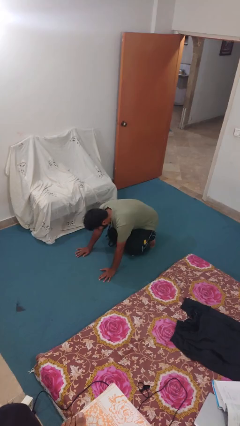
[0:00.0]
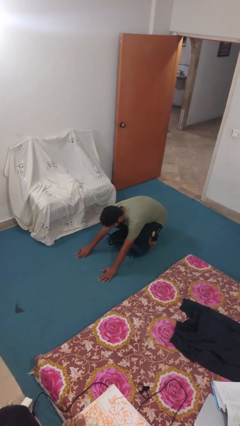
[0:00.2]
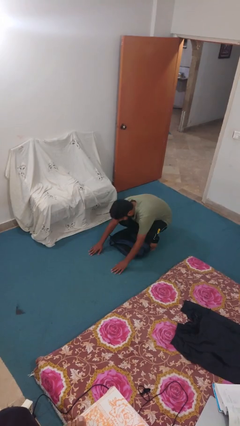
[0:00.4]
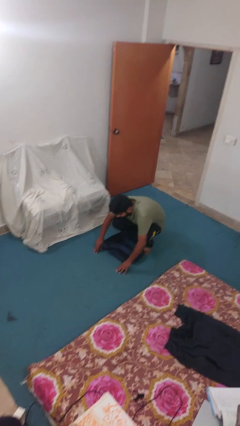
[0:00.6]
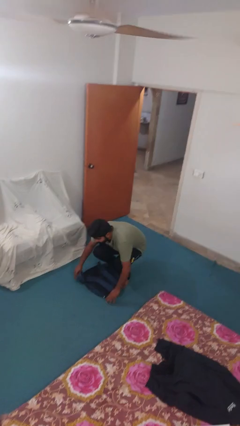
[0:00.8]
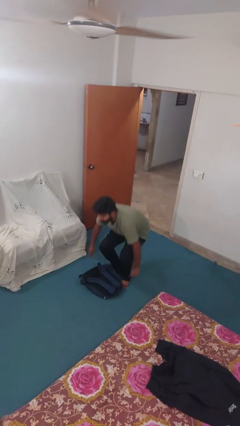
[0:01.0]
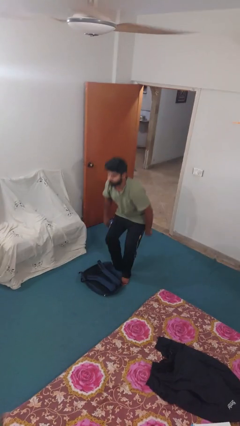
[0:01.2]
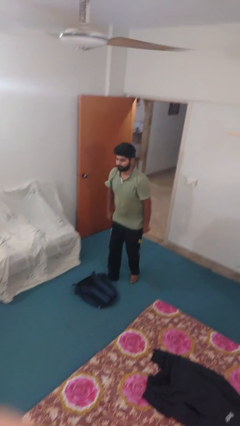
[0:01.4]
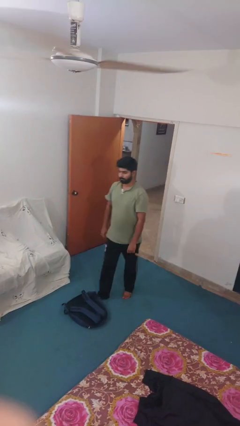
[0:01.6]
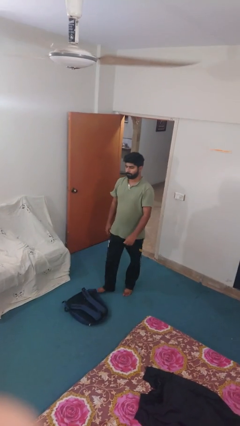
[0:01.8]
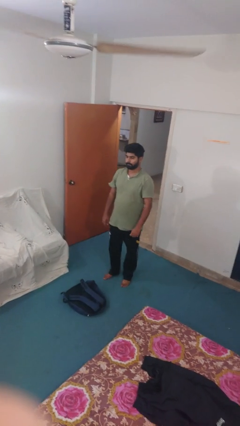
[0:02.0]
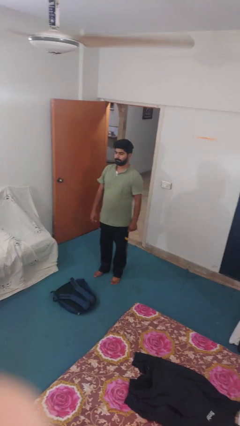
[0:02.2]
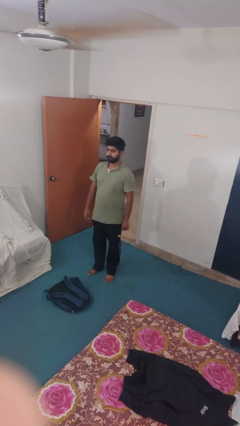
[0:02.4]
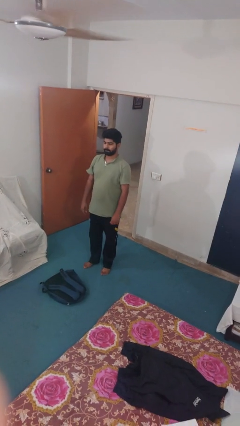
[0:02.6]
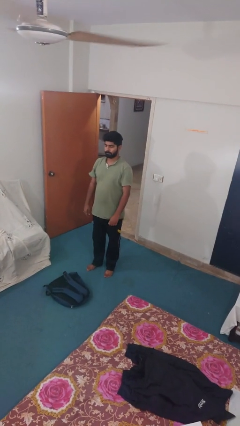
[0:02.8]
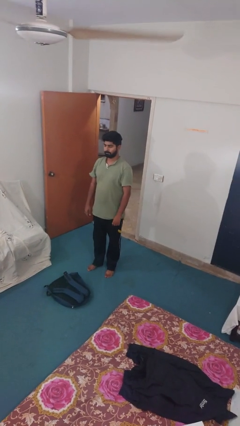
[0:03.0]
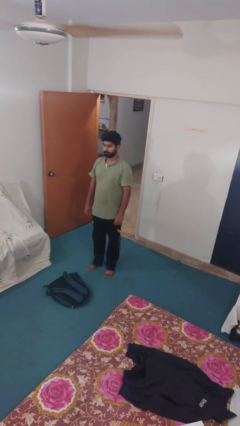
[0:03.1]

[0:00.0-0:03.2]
person stands up from floor

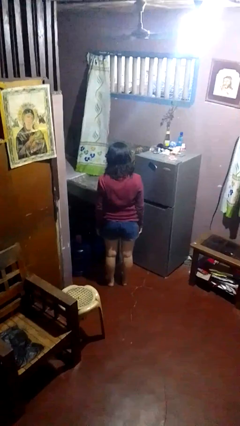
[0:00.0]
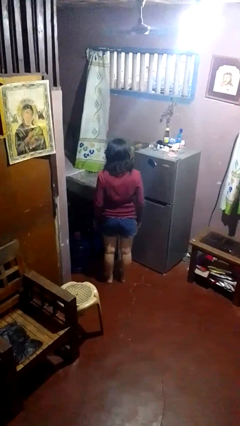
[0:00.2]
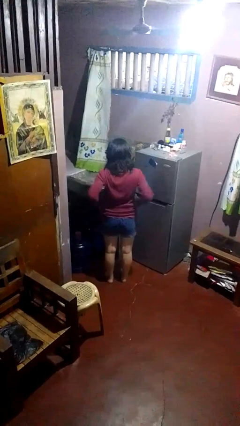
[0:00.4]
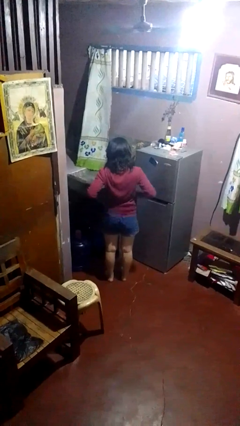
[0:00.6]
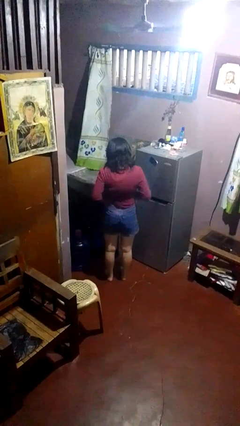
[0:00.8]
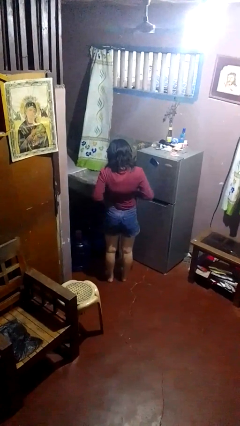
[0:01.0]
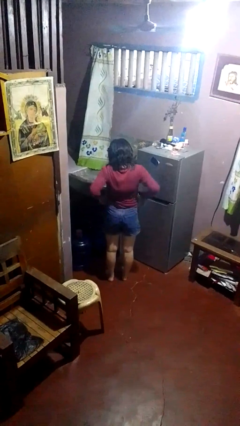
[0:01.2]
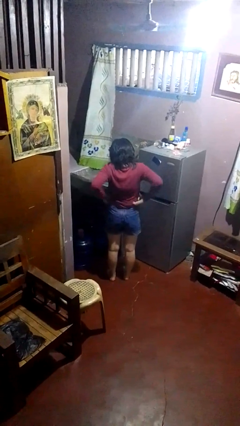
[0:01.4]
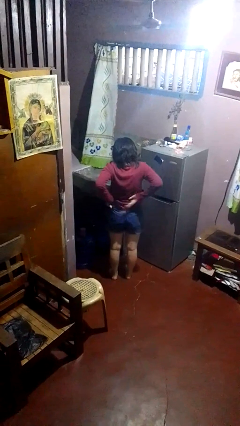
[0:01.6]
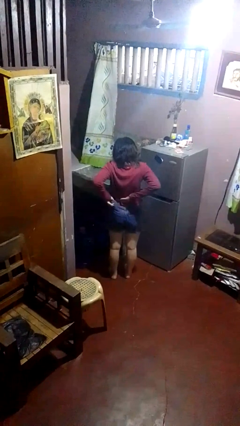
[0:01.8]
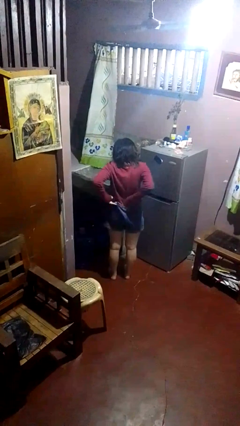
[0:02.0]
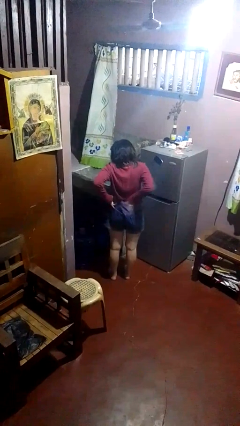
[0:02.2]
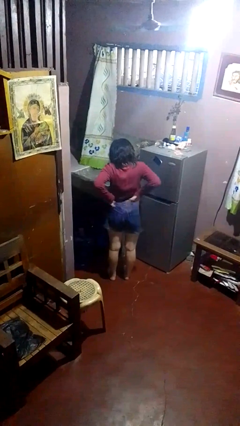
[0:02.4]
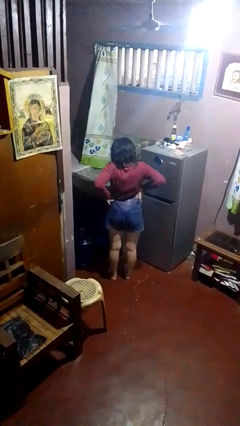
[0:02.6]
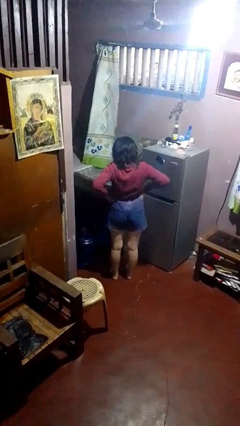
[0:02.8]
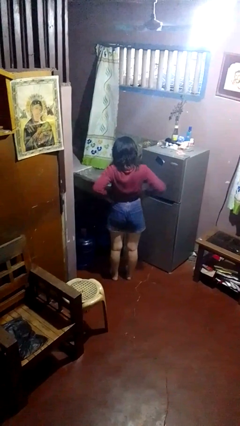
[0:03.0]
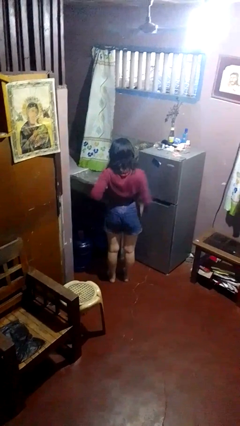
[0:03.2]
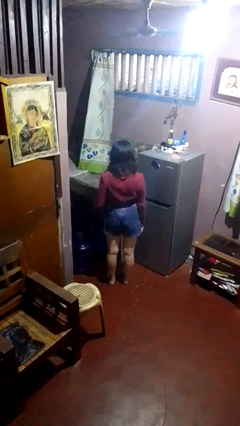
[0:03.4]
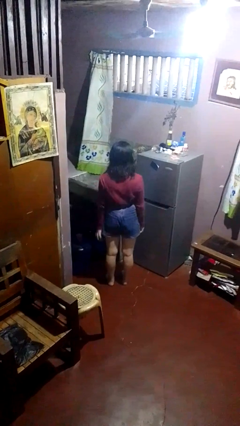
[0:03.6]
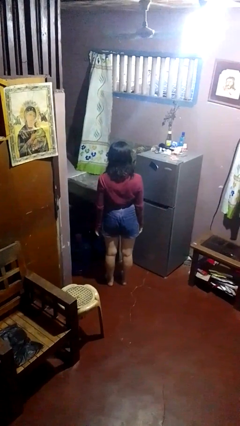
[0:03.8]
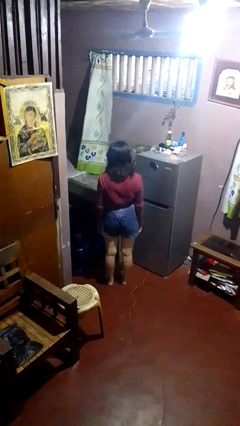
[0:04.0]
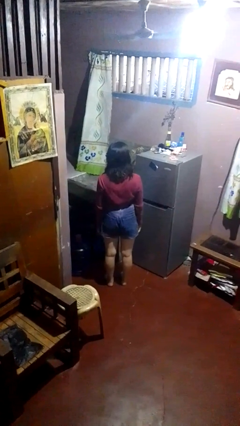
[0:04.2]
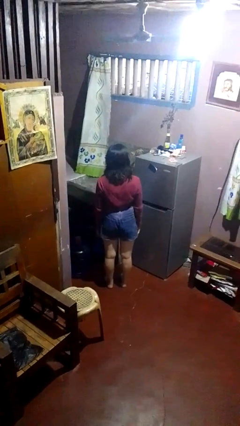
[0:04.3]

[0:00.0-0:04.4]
person tucks in shirt

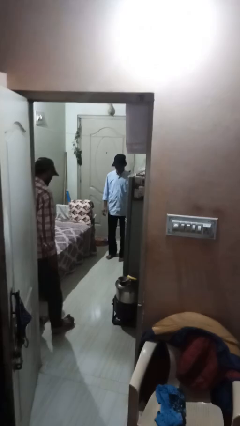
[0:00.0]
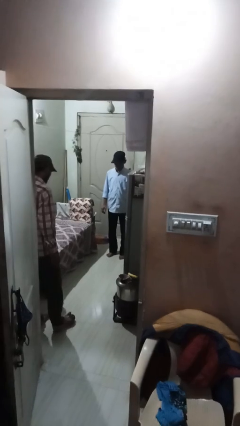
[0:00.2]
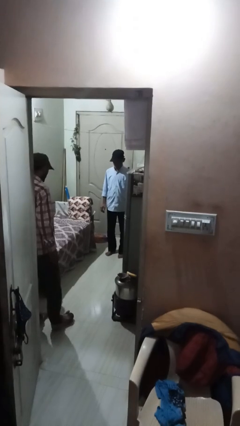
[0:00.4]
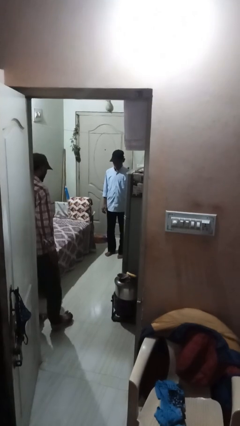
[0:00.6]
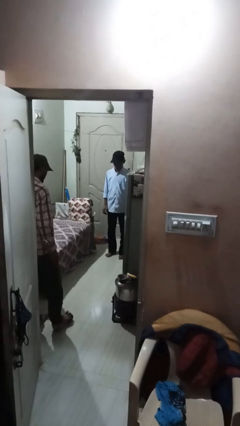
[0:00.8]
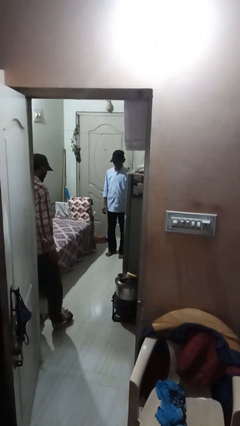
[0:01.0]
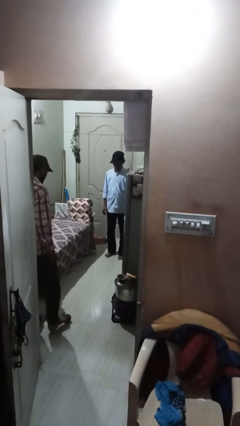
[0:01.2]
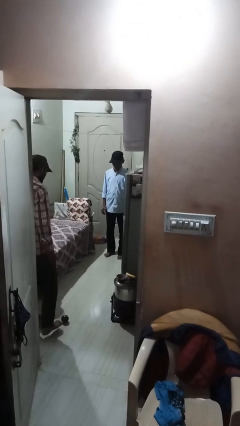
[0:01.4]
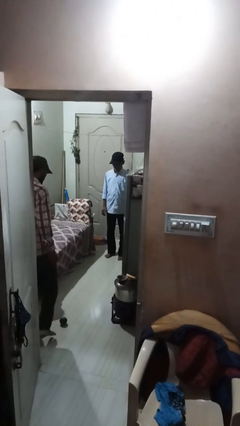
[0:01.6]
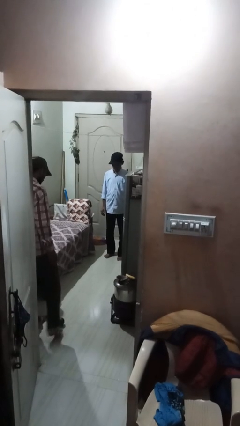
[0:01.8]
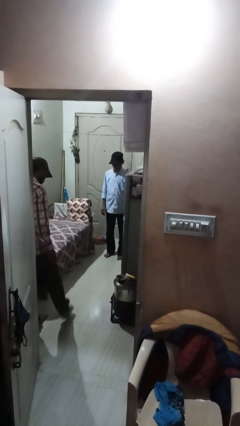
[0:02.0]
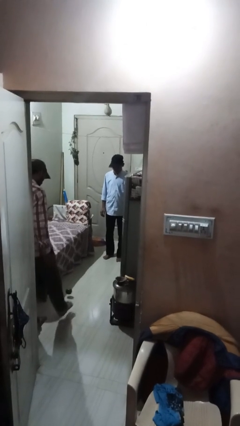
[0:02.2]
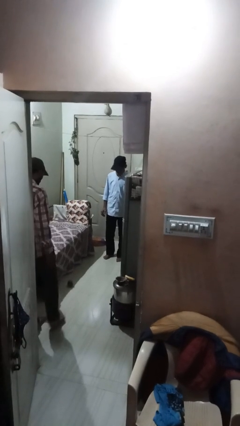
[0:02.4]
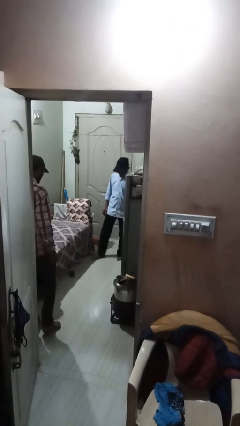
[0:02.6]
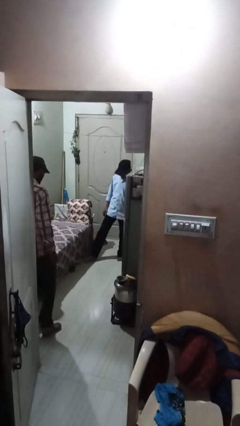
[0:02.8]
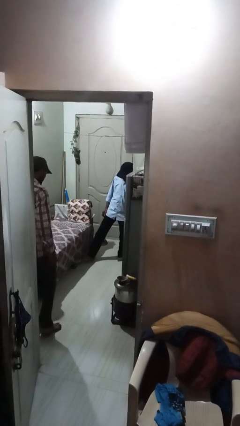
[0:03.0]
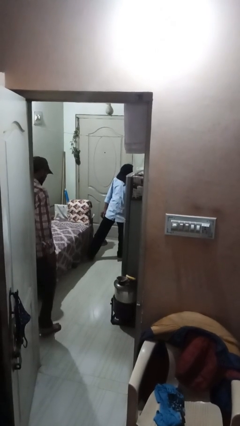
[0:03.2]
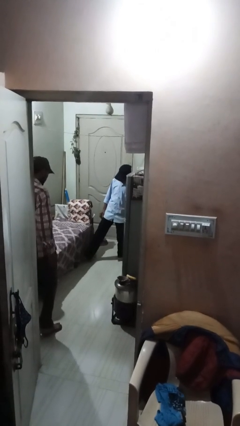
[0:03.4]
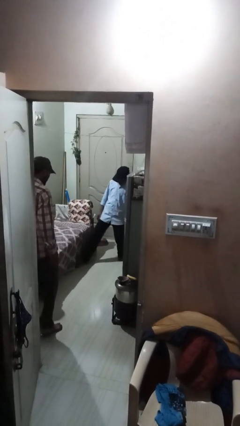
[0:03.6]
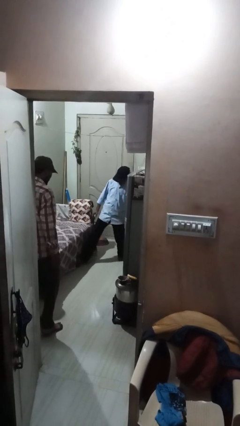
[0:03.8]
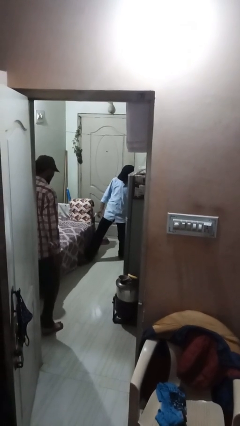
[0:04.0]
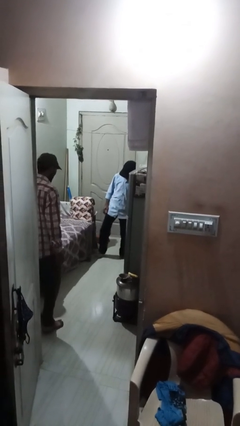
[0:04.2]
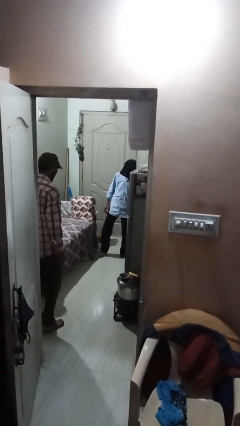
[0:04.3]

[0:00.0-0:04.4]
person kicks object to person

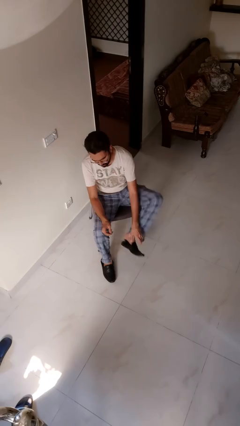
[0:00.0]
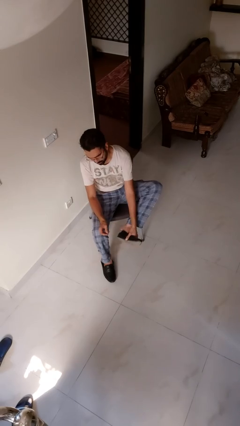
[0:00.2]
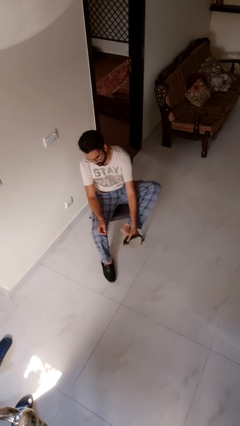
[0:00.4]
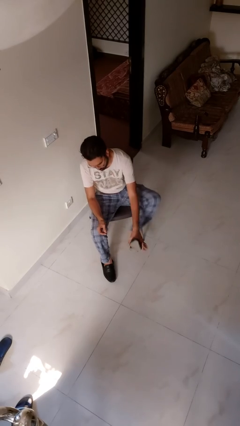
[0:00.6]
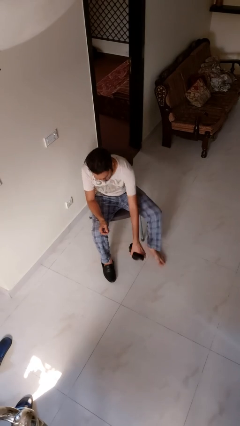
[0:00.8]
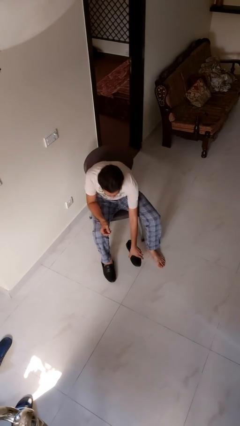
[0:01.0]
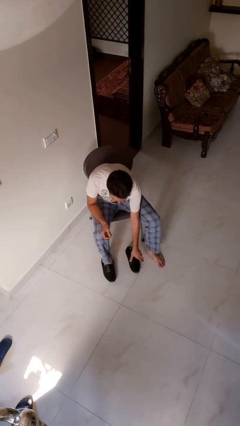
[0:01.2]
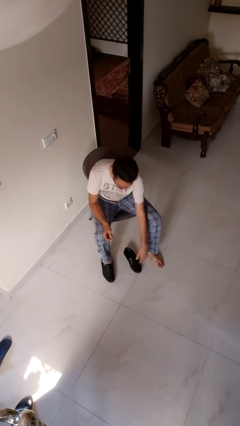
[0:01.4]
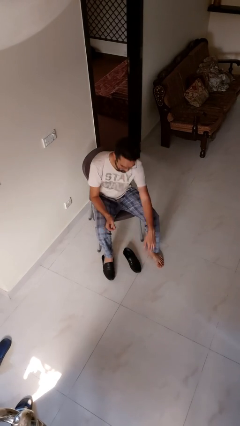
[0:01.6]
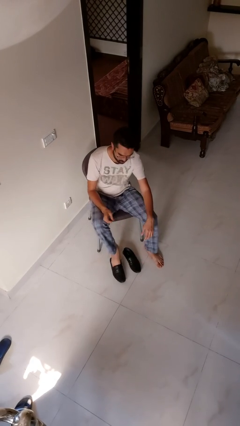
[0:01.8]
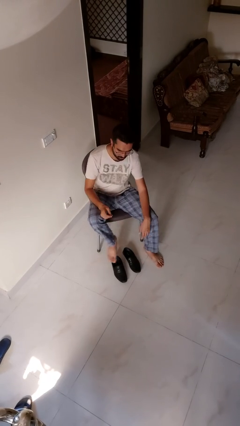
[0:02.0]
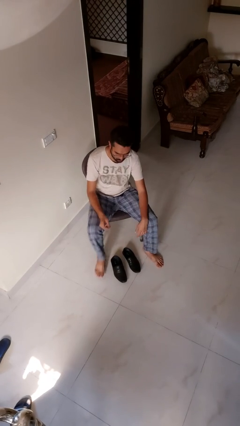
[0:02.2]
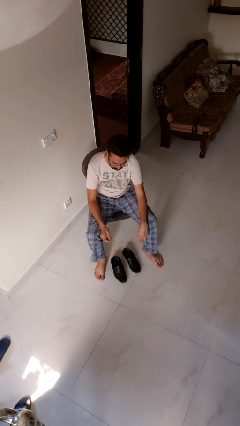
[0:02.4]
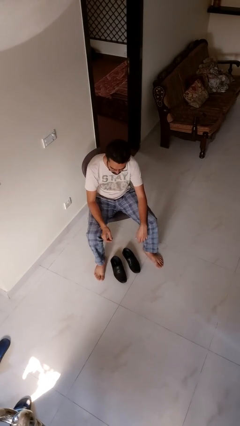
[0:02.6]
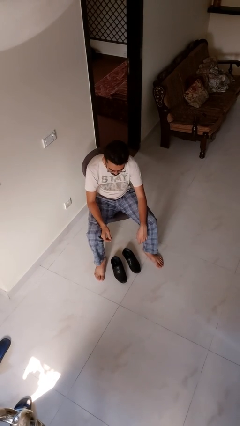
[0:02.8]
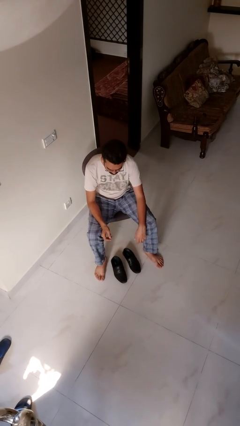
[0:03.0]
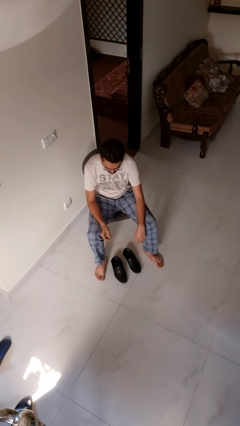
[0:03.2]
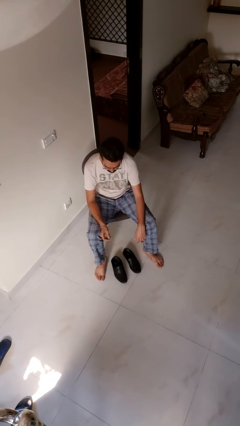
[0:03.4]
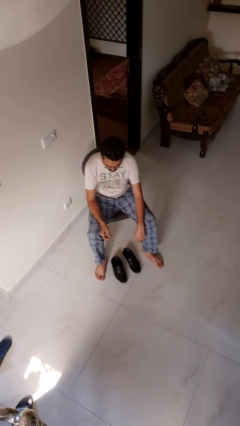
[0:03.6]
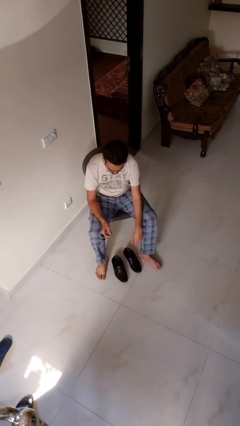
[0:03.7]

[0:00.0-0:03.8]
person takes off boots

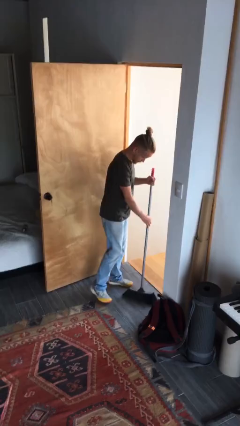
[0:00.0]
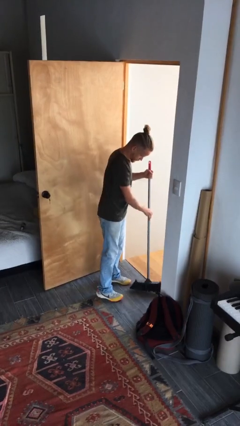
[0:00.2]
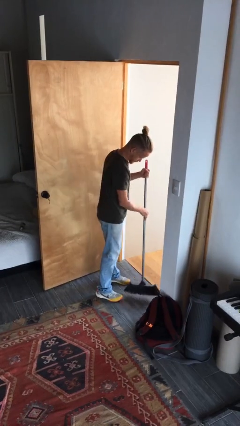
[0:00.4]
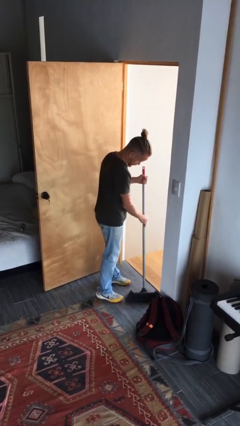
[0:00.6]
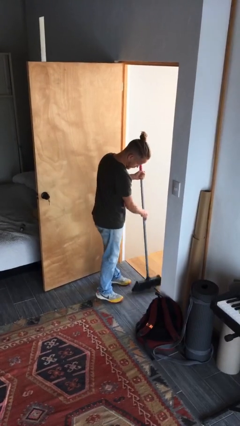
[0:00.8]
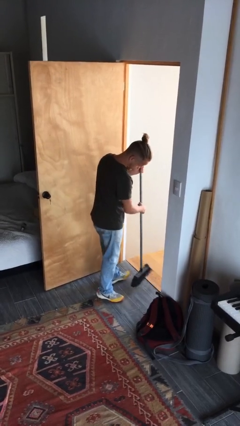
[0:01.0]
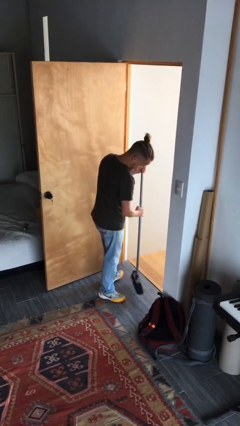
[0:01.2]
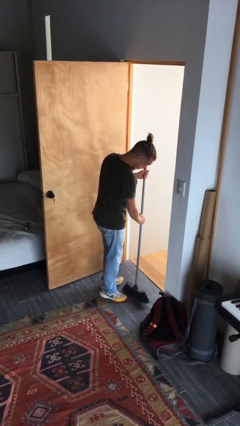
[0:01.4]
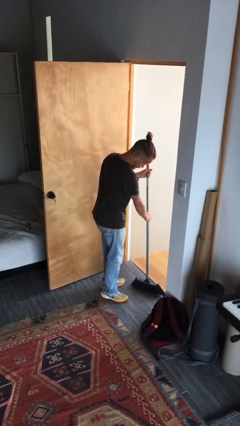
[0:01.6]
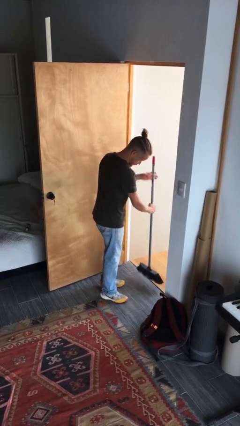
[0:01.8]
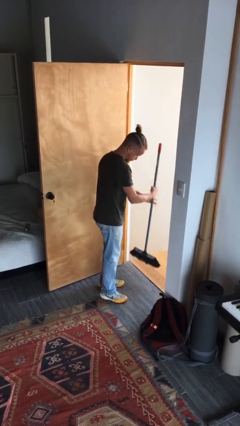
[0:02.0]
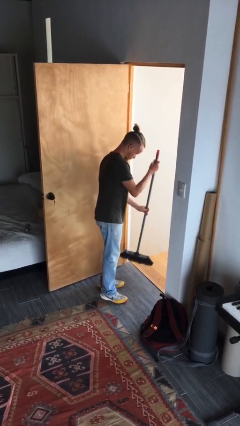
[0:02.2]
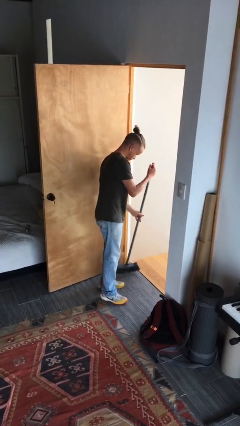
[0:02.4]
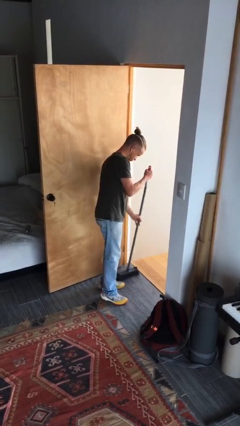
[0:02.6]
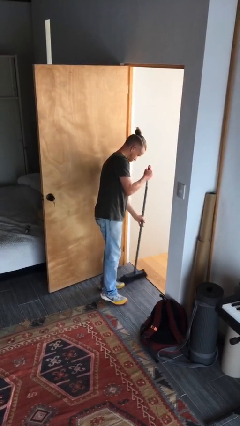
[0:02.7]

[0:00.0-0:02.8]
person sweeps floor
